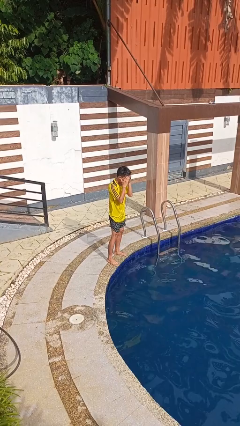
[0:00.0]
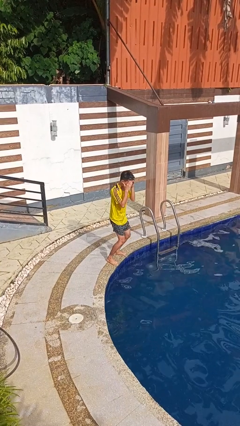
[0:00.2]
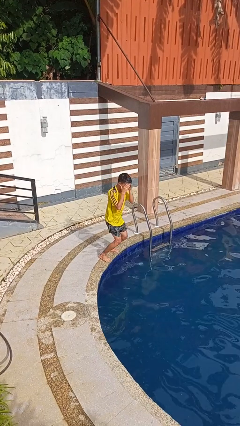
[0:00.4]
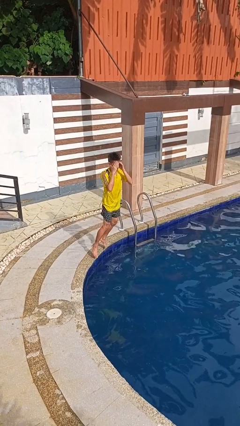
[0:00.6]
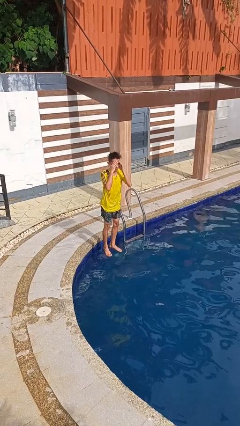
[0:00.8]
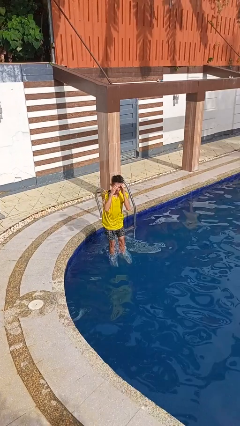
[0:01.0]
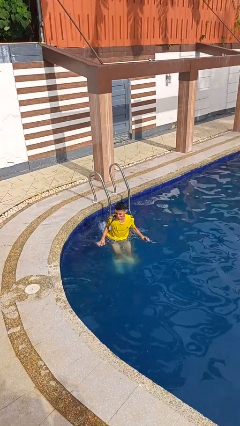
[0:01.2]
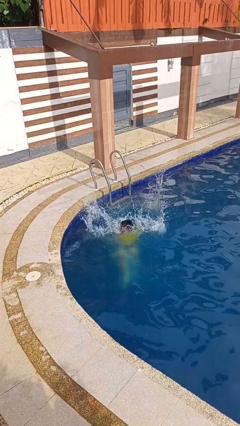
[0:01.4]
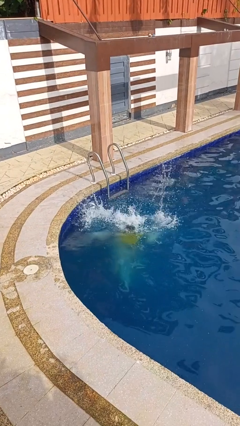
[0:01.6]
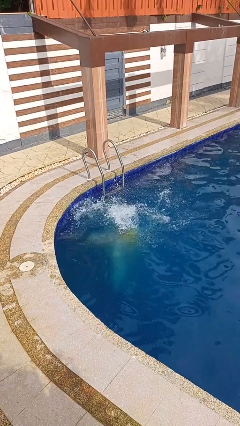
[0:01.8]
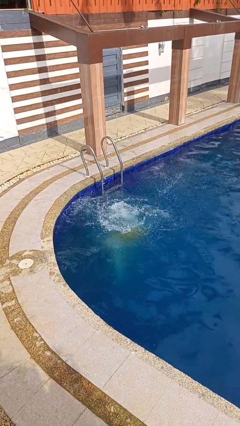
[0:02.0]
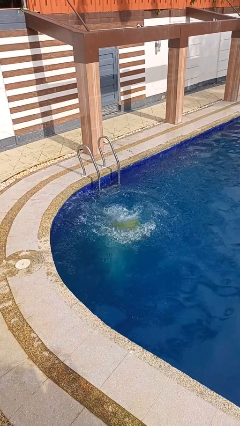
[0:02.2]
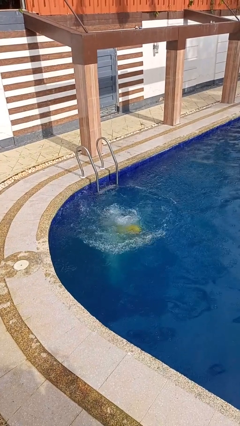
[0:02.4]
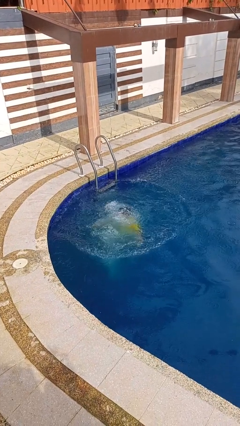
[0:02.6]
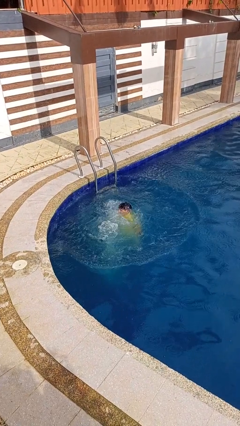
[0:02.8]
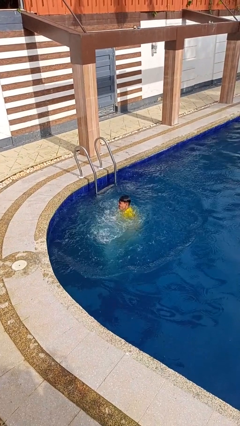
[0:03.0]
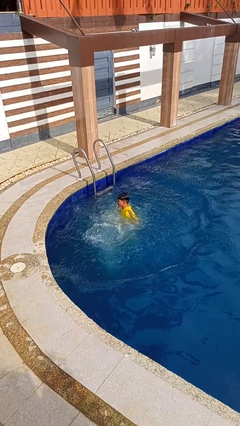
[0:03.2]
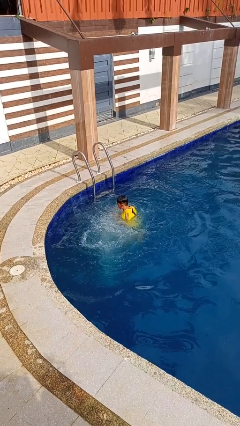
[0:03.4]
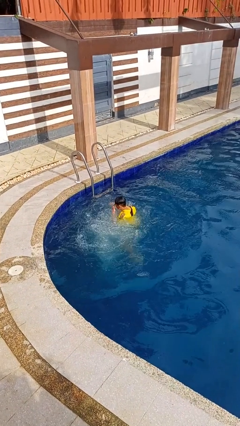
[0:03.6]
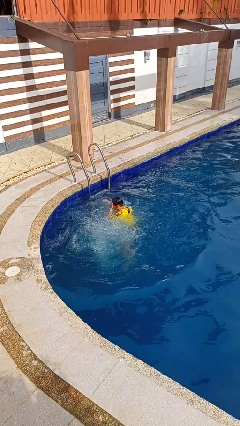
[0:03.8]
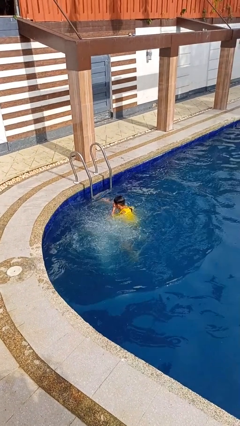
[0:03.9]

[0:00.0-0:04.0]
person jumps into pool

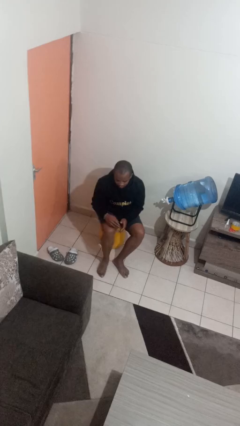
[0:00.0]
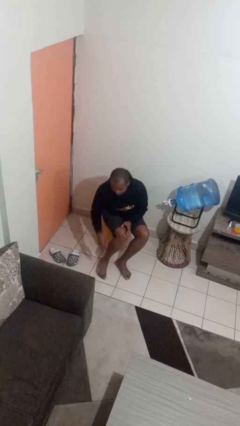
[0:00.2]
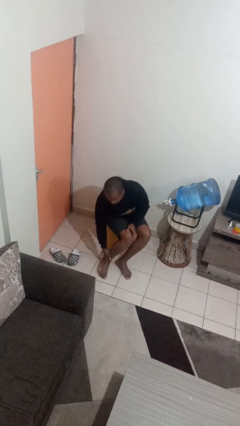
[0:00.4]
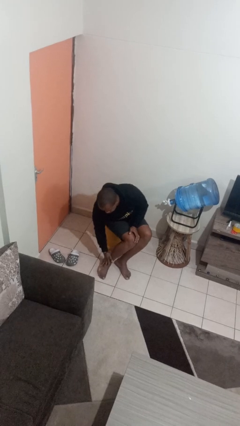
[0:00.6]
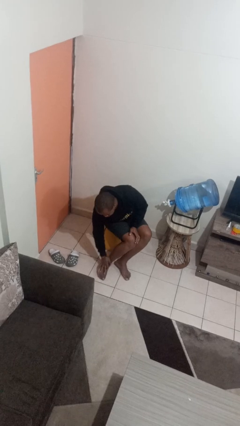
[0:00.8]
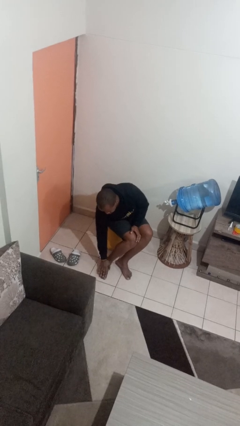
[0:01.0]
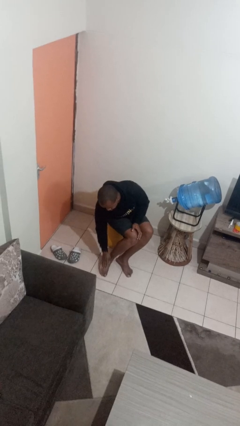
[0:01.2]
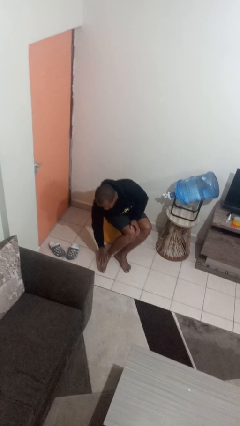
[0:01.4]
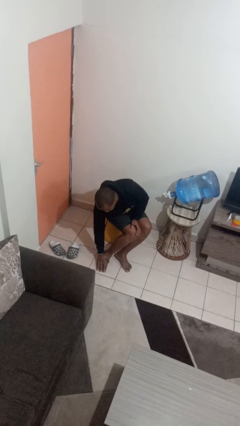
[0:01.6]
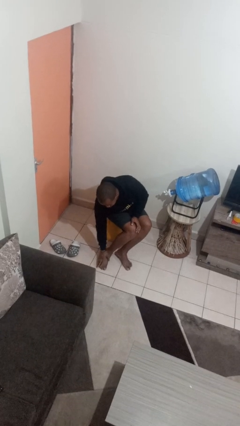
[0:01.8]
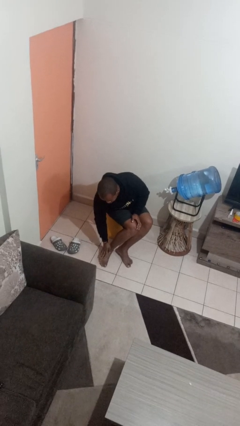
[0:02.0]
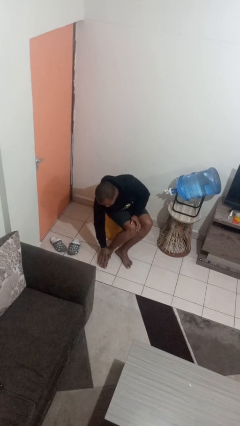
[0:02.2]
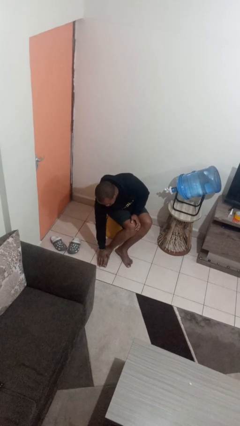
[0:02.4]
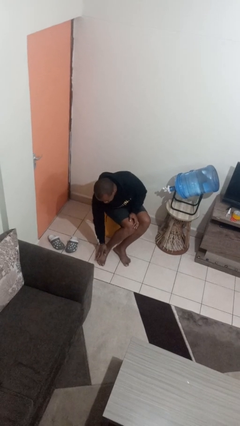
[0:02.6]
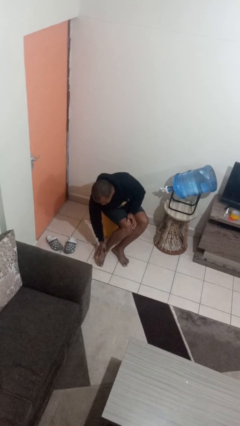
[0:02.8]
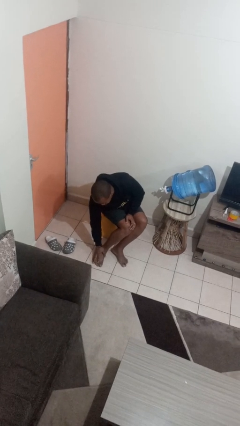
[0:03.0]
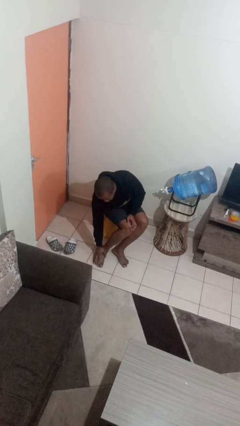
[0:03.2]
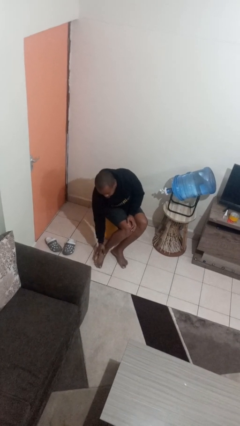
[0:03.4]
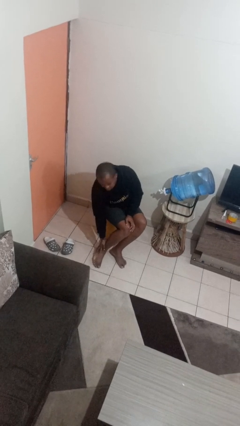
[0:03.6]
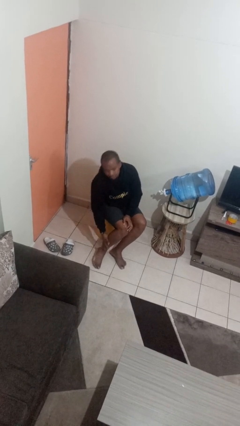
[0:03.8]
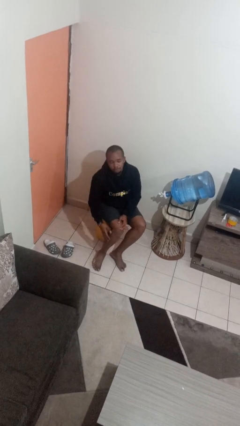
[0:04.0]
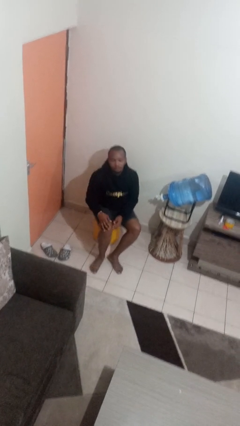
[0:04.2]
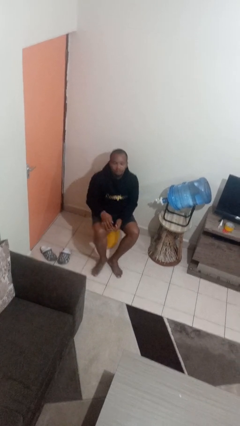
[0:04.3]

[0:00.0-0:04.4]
person rubs foot

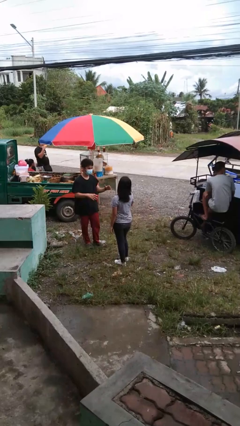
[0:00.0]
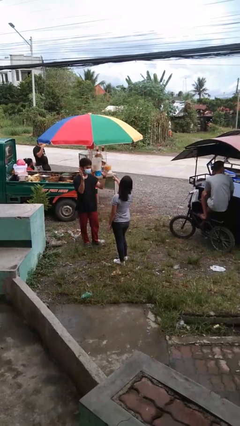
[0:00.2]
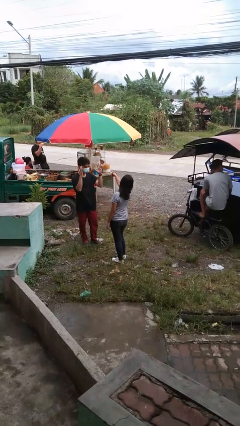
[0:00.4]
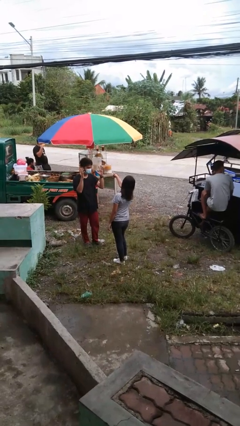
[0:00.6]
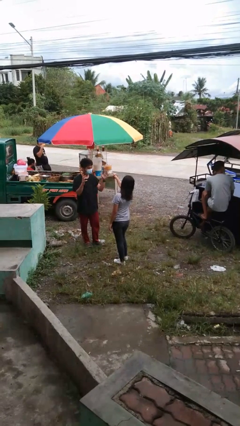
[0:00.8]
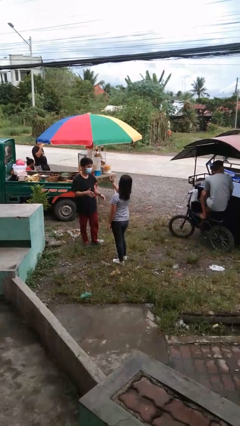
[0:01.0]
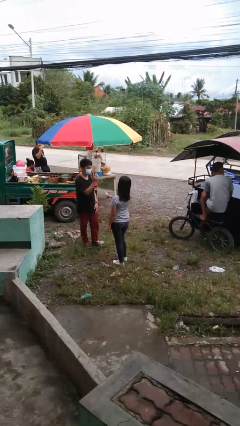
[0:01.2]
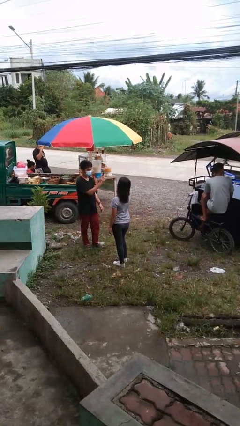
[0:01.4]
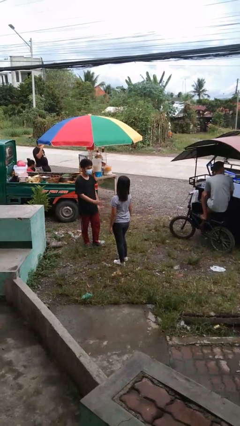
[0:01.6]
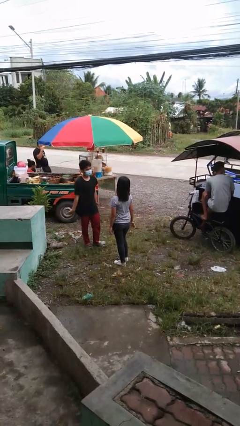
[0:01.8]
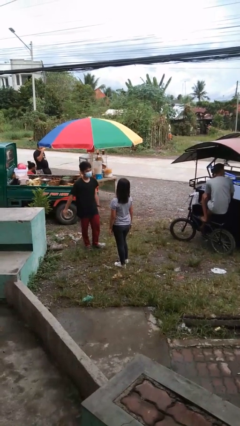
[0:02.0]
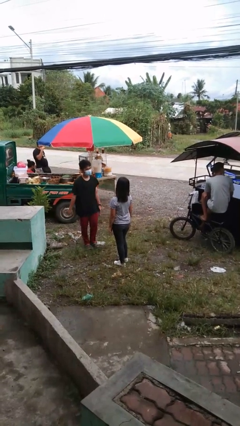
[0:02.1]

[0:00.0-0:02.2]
person talks to person

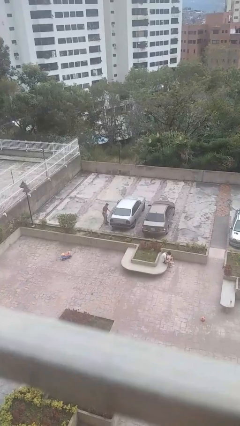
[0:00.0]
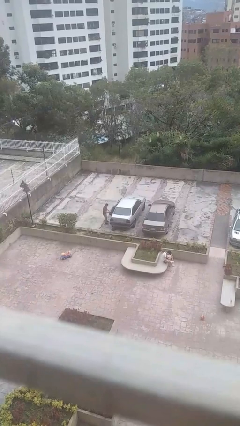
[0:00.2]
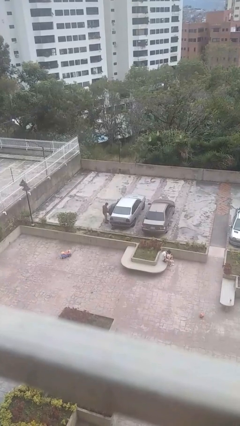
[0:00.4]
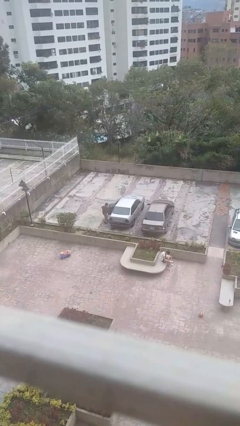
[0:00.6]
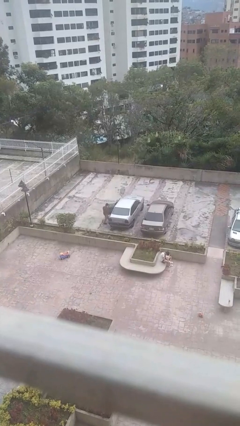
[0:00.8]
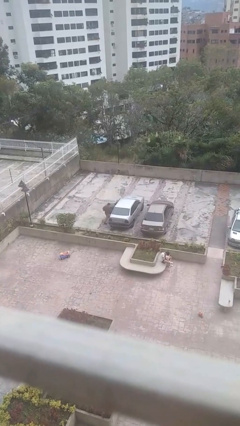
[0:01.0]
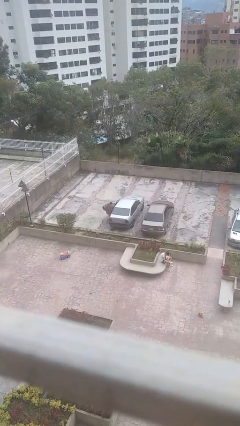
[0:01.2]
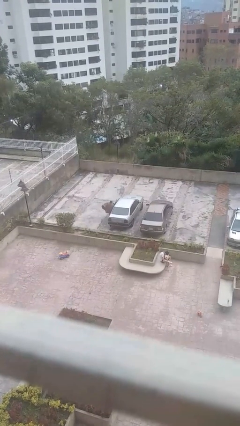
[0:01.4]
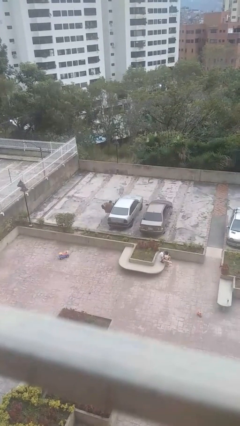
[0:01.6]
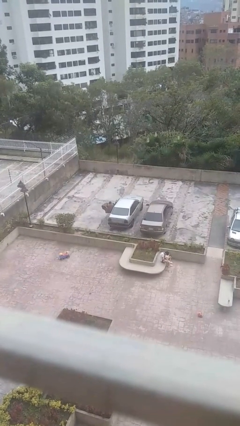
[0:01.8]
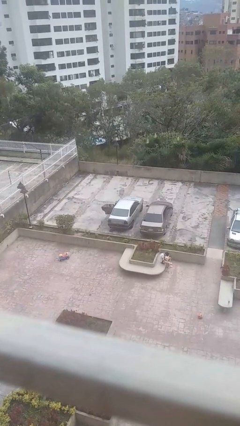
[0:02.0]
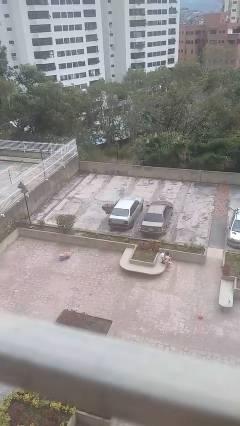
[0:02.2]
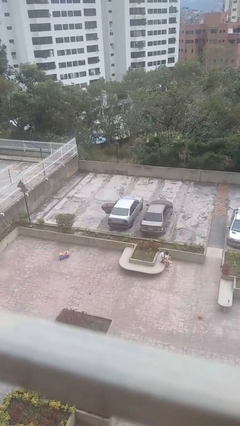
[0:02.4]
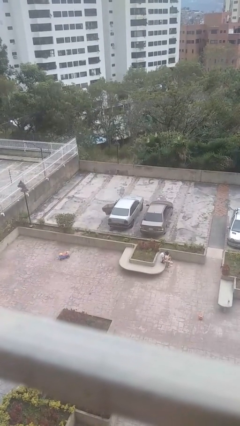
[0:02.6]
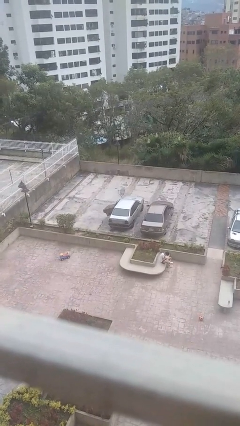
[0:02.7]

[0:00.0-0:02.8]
car picks up person

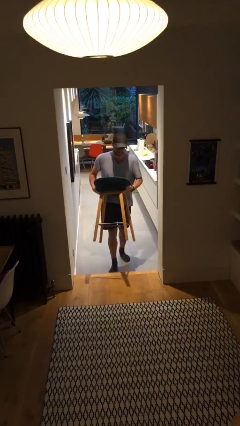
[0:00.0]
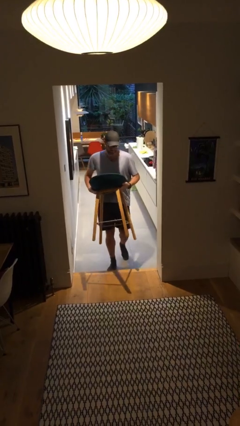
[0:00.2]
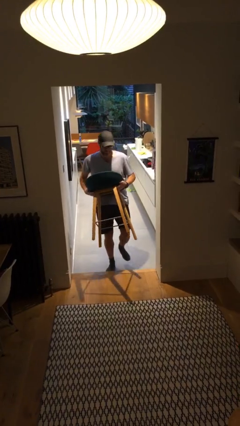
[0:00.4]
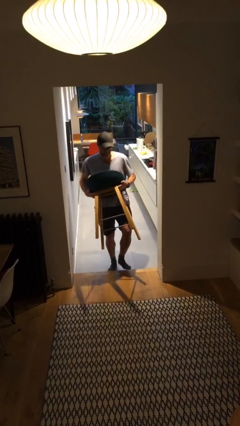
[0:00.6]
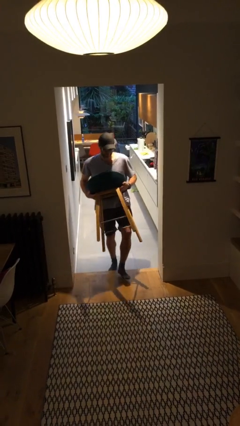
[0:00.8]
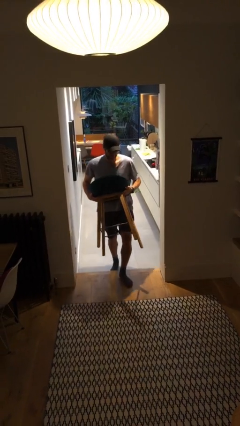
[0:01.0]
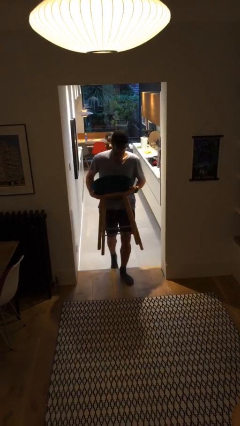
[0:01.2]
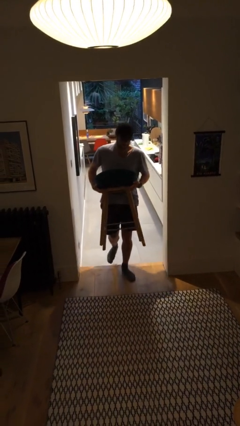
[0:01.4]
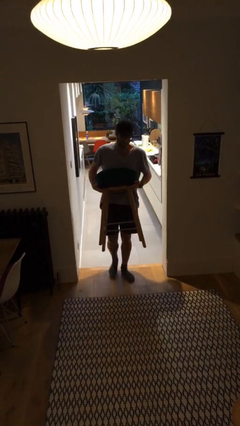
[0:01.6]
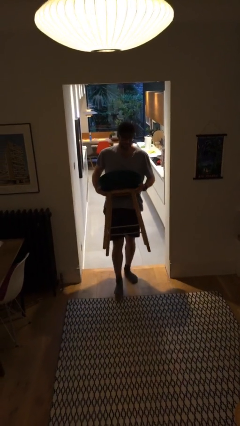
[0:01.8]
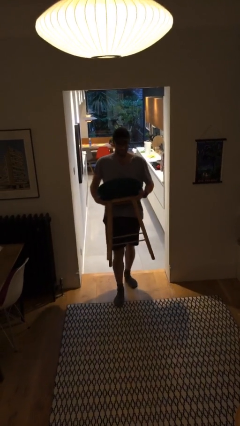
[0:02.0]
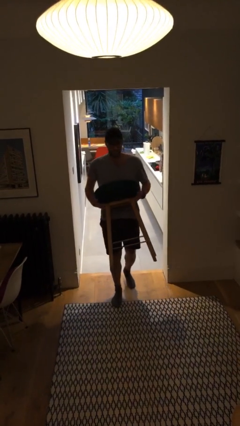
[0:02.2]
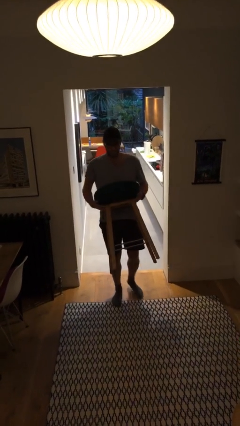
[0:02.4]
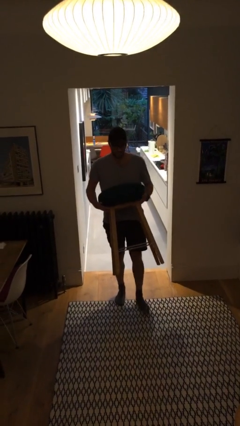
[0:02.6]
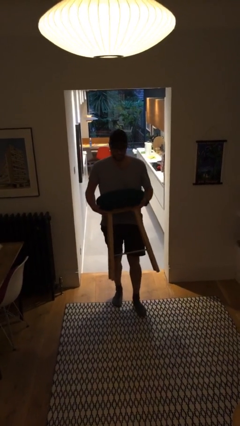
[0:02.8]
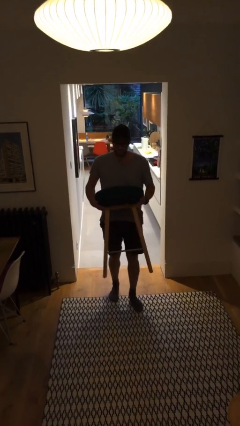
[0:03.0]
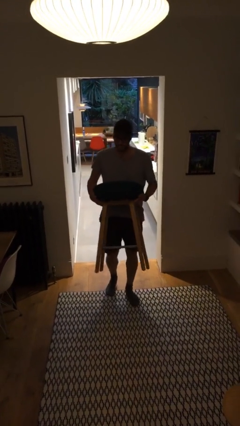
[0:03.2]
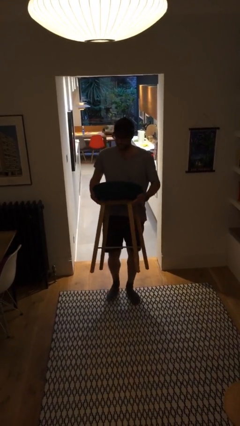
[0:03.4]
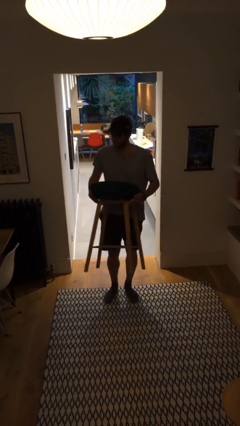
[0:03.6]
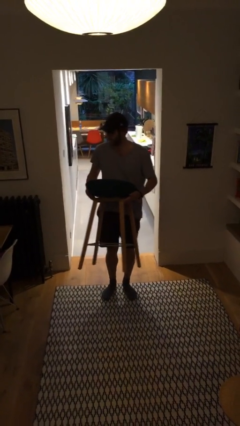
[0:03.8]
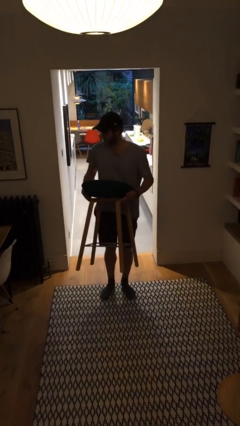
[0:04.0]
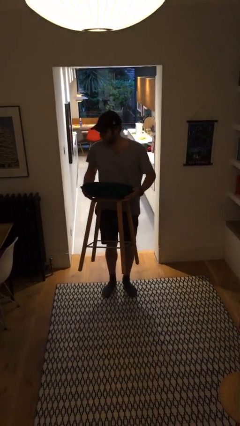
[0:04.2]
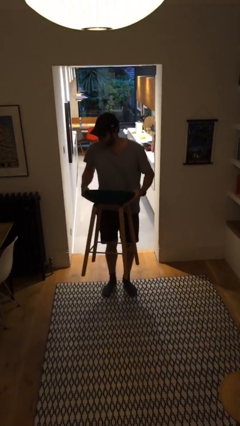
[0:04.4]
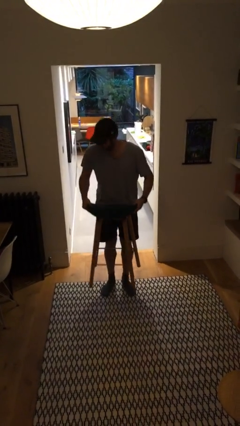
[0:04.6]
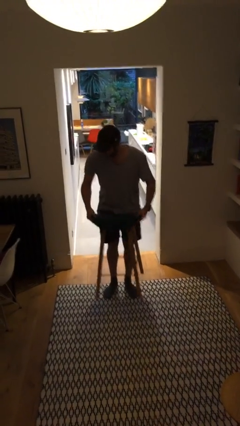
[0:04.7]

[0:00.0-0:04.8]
person carries heavy object
